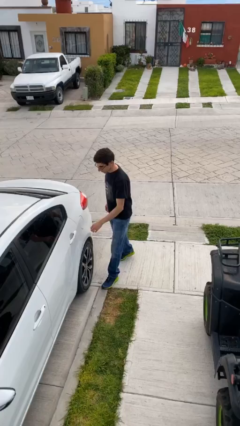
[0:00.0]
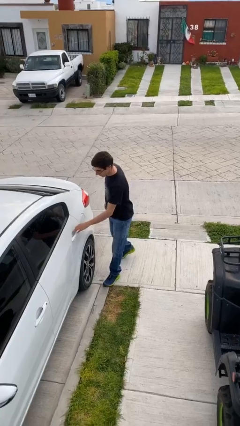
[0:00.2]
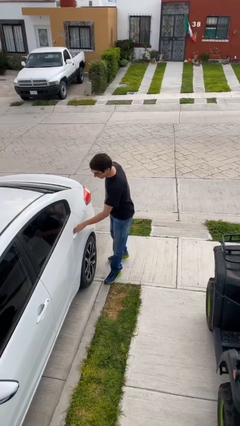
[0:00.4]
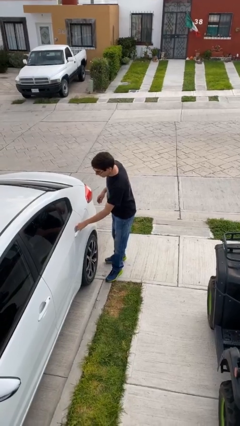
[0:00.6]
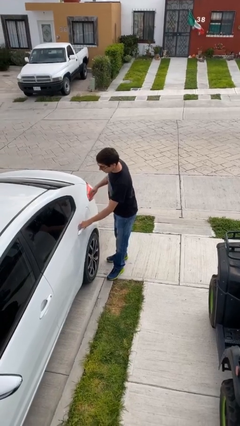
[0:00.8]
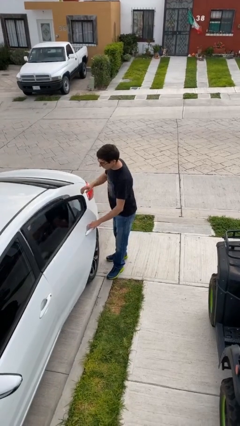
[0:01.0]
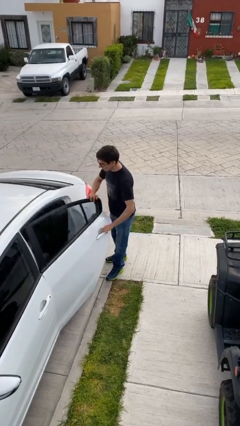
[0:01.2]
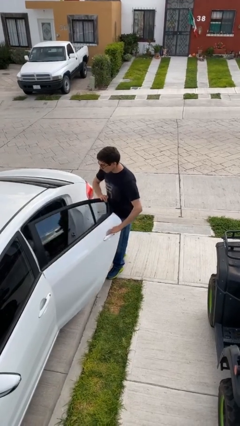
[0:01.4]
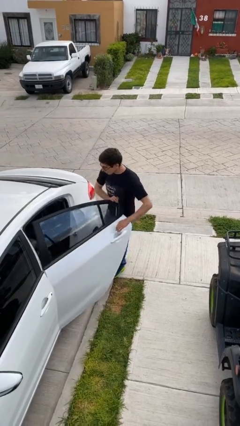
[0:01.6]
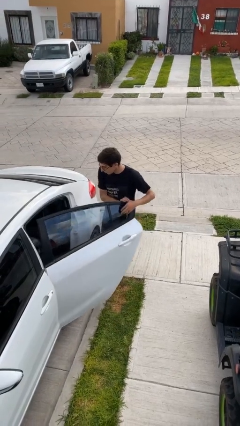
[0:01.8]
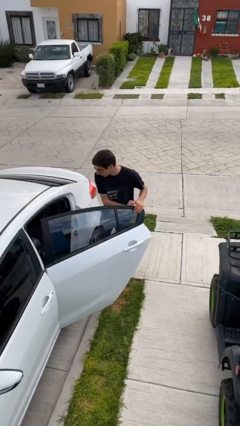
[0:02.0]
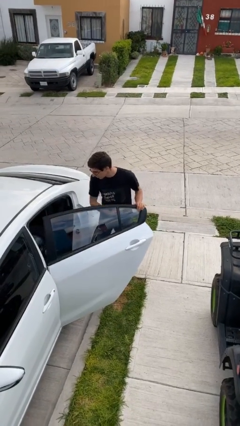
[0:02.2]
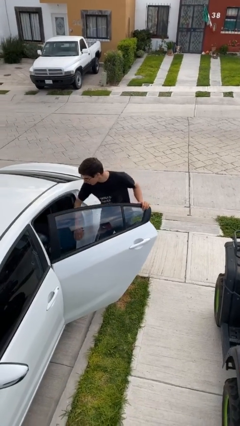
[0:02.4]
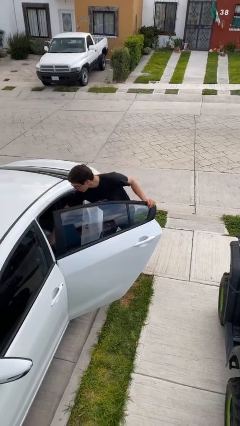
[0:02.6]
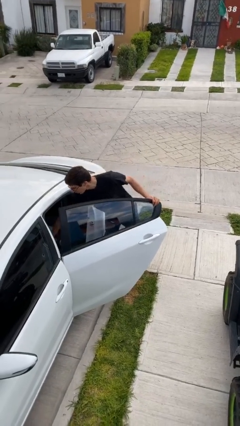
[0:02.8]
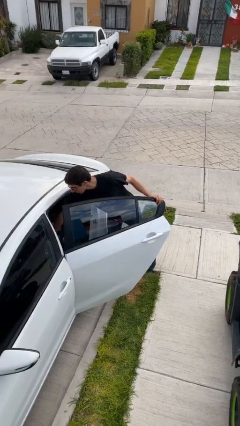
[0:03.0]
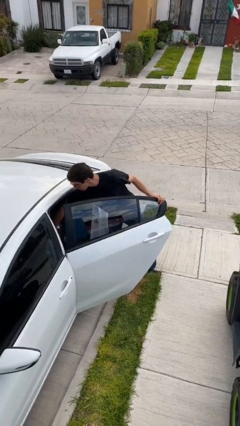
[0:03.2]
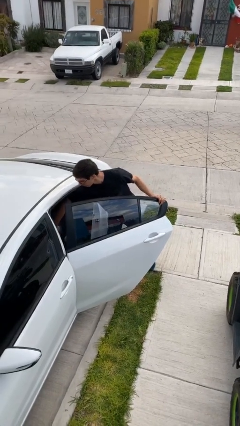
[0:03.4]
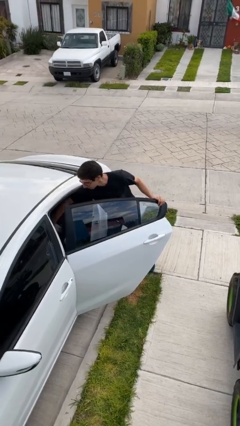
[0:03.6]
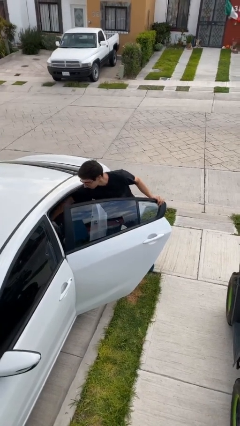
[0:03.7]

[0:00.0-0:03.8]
person opens car door

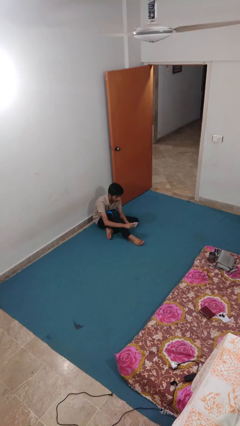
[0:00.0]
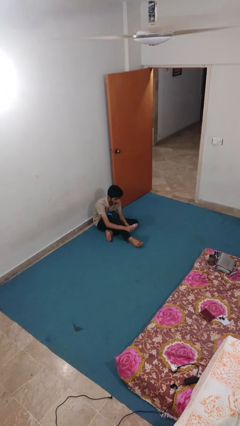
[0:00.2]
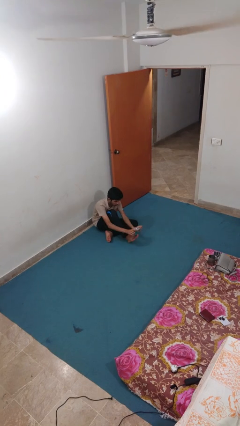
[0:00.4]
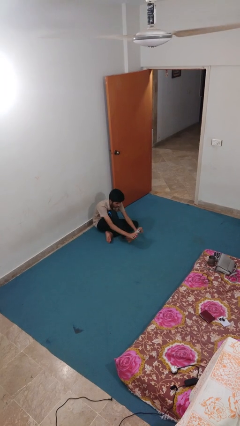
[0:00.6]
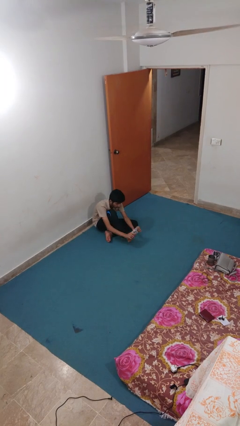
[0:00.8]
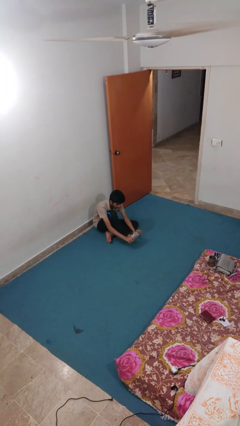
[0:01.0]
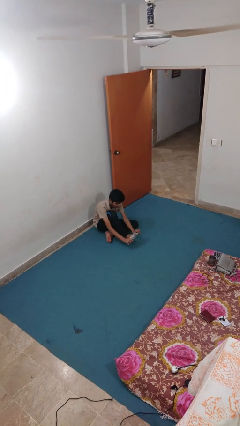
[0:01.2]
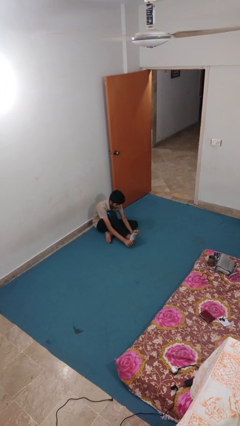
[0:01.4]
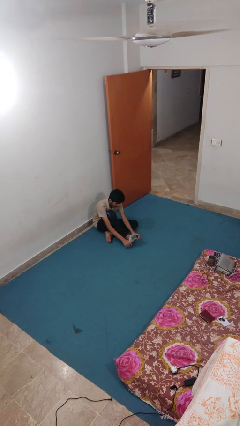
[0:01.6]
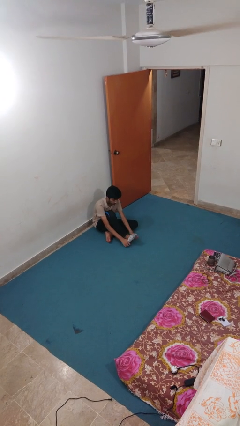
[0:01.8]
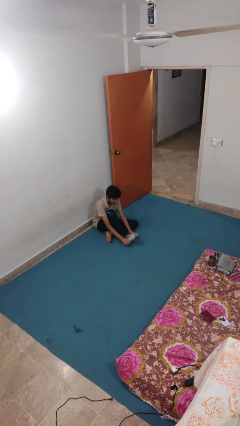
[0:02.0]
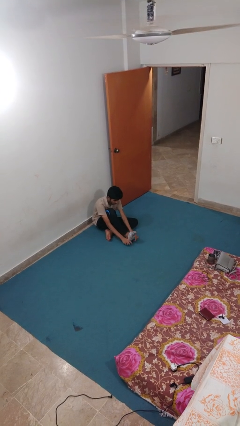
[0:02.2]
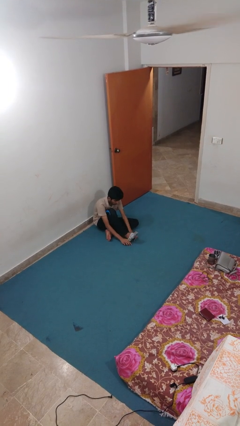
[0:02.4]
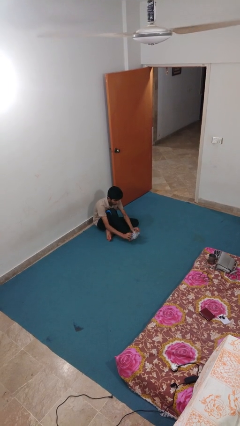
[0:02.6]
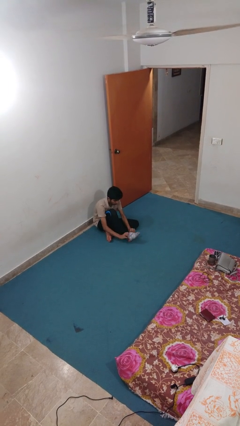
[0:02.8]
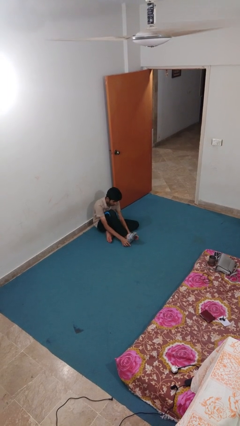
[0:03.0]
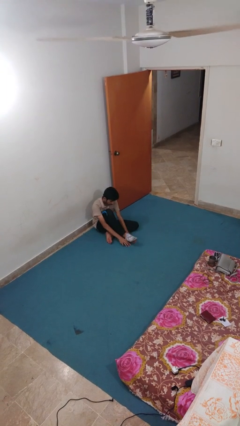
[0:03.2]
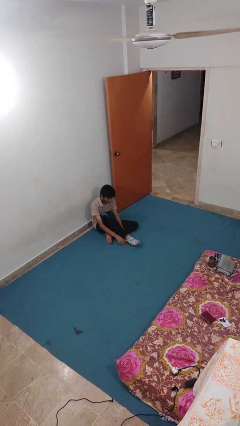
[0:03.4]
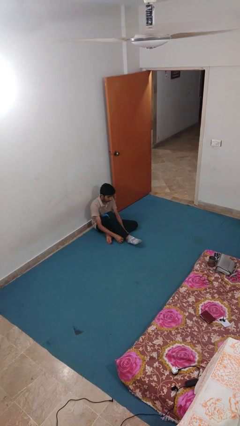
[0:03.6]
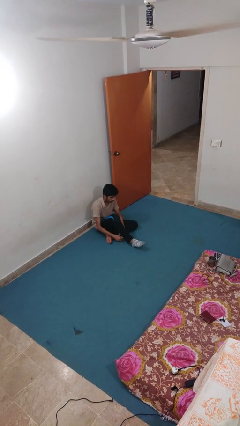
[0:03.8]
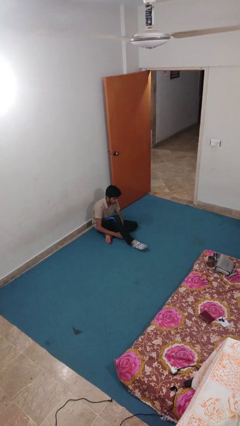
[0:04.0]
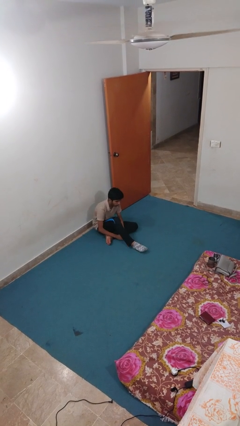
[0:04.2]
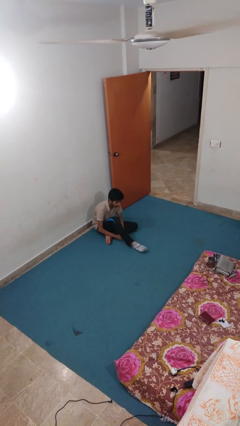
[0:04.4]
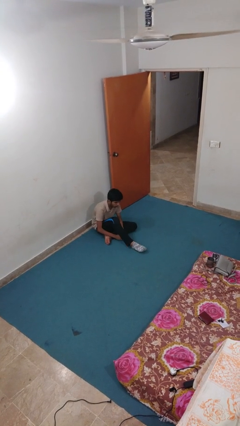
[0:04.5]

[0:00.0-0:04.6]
person puts on socks

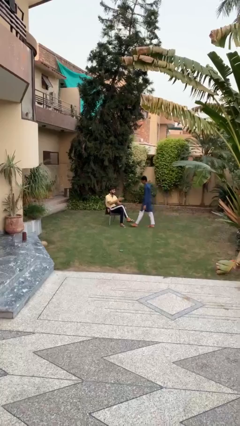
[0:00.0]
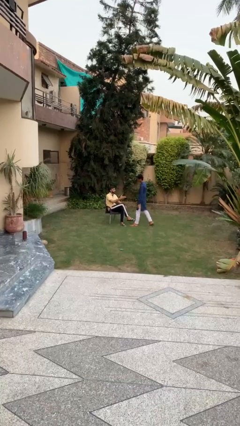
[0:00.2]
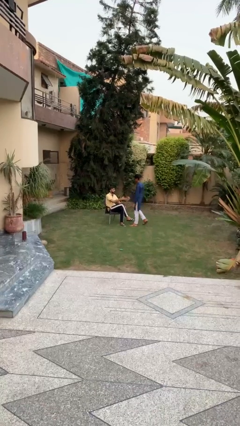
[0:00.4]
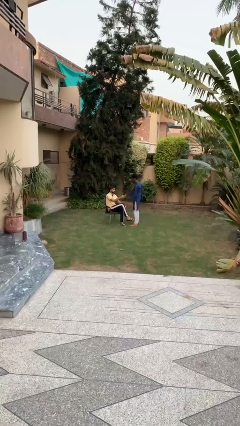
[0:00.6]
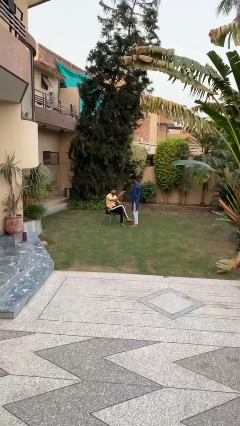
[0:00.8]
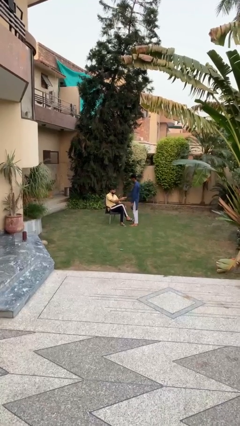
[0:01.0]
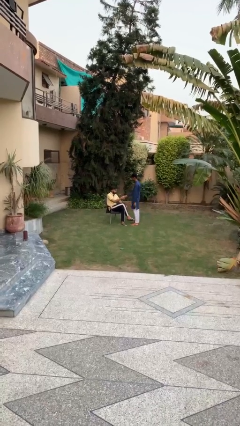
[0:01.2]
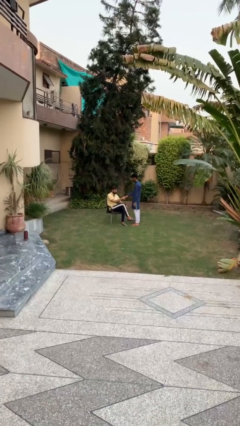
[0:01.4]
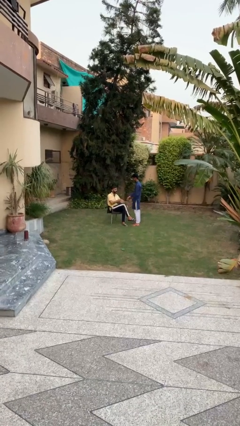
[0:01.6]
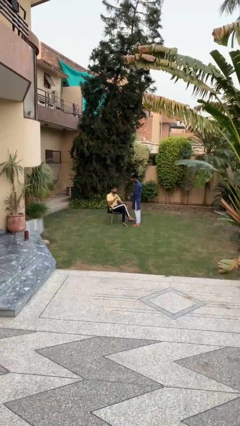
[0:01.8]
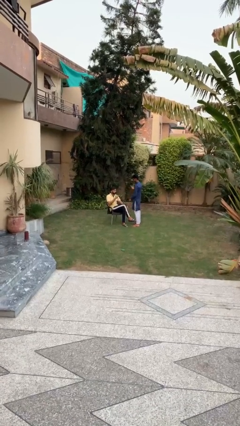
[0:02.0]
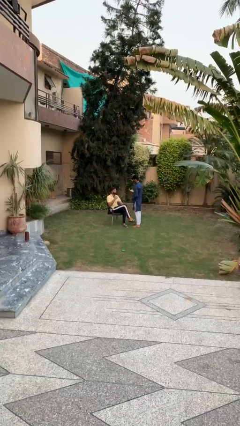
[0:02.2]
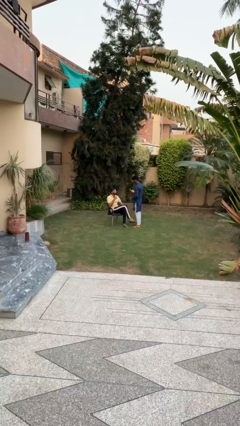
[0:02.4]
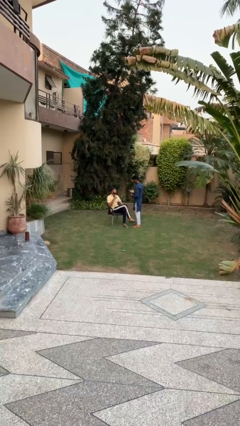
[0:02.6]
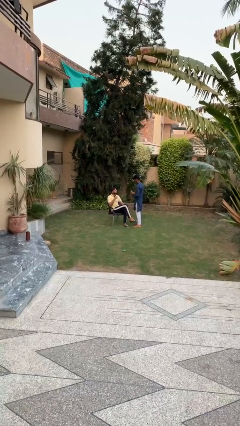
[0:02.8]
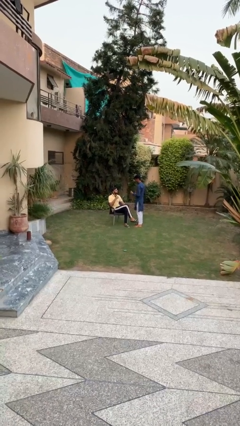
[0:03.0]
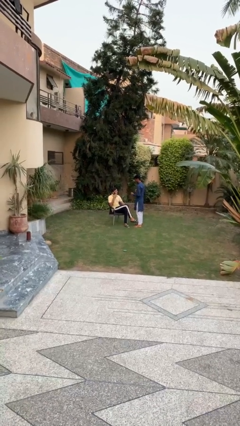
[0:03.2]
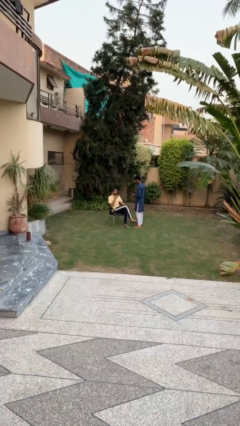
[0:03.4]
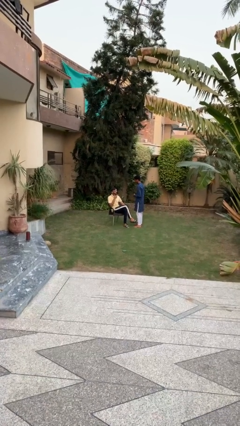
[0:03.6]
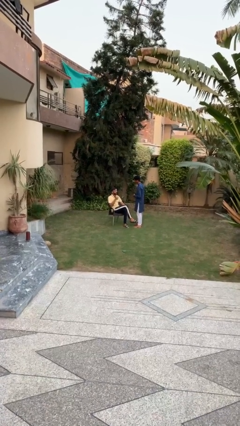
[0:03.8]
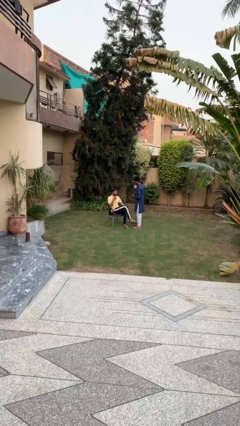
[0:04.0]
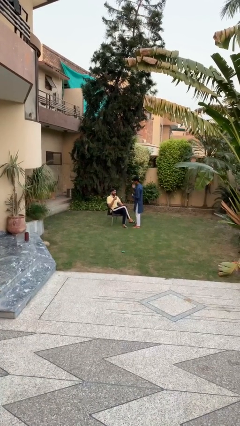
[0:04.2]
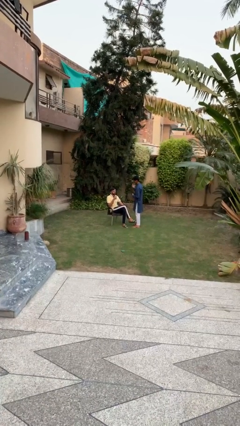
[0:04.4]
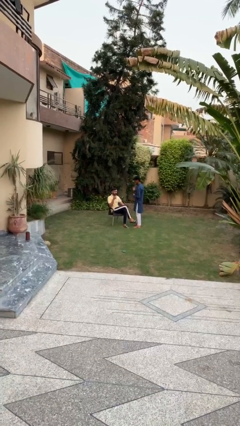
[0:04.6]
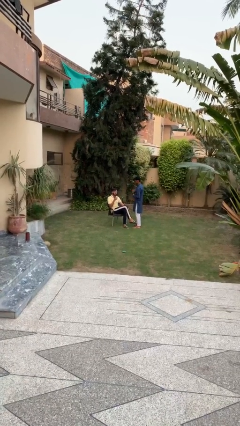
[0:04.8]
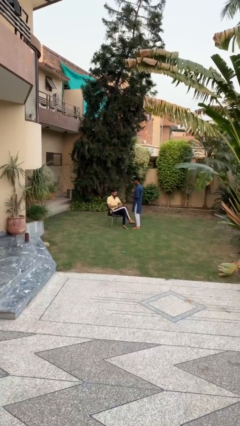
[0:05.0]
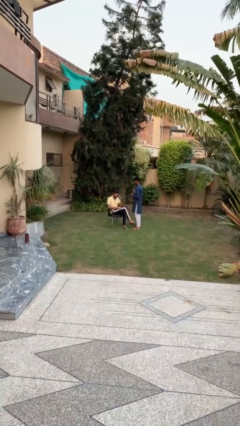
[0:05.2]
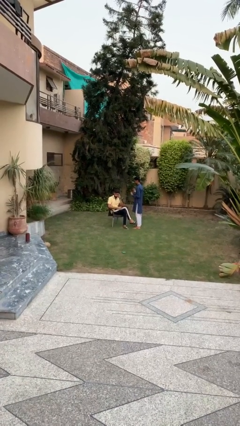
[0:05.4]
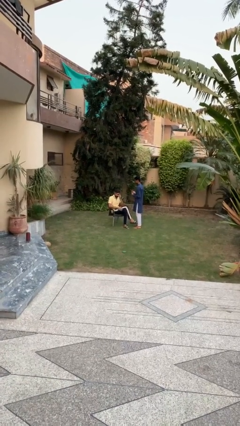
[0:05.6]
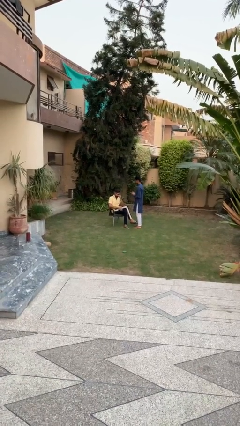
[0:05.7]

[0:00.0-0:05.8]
person shakes hand

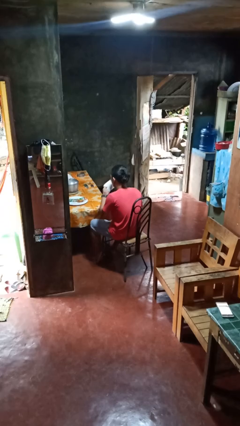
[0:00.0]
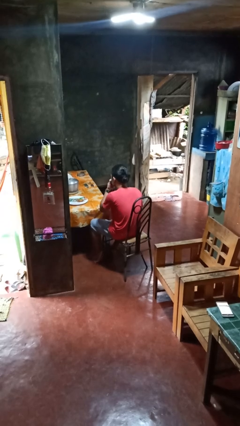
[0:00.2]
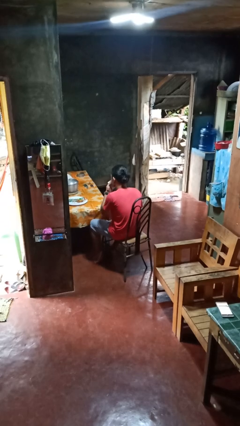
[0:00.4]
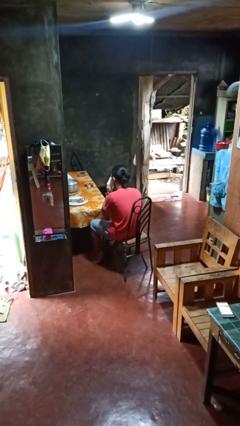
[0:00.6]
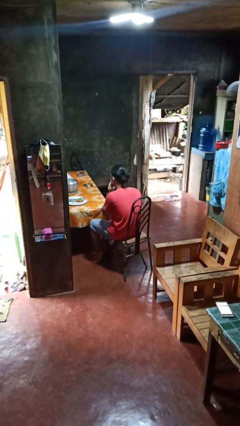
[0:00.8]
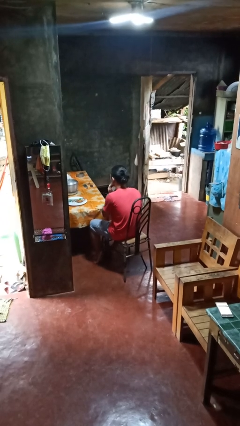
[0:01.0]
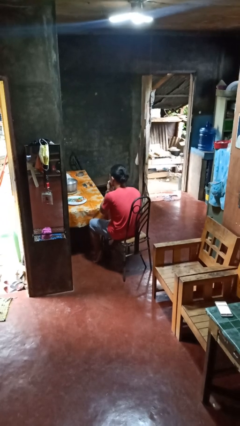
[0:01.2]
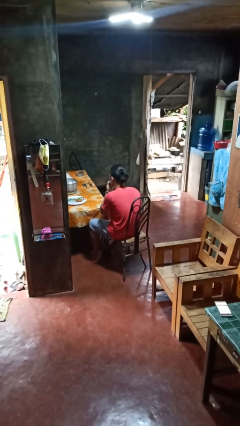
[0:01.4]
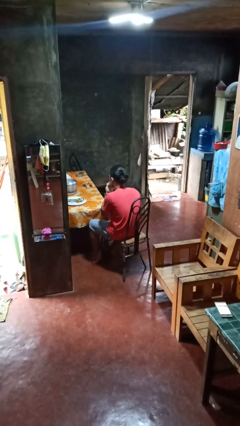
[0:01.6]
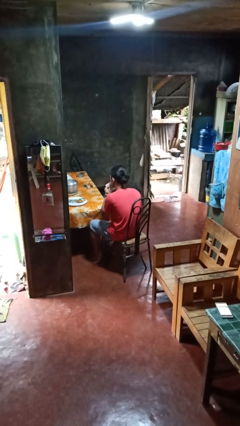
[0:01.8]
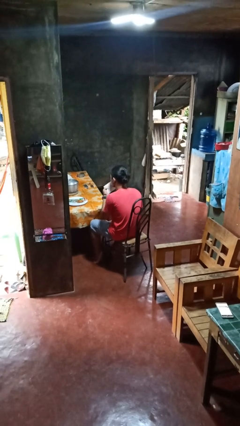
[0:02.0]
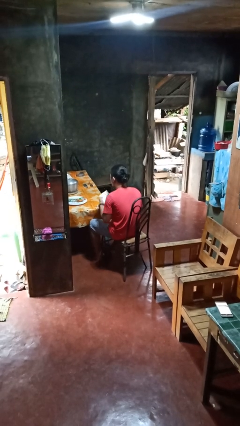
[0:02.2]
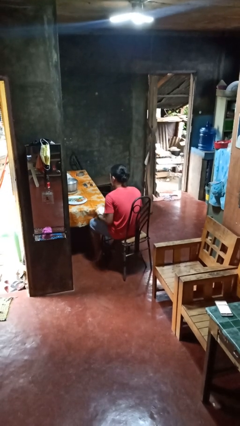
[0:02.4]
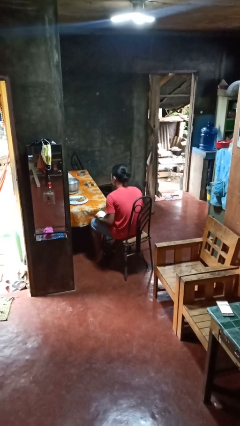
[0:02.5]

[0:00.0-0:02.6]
person wipes mouth with napkin

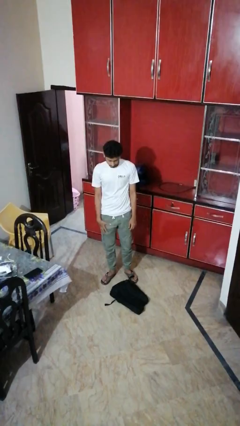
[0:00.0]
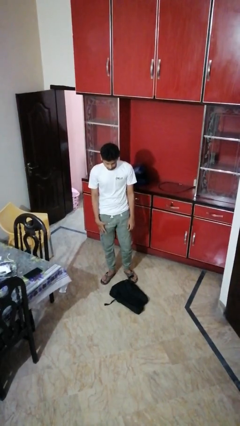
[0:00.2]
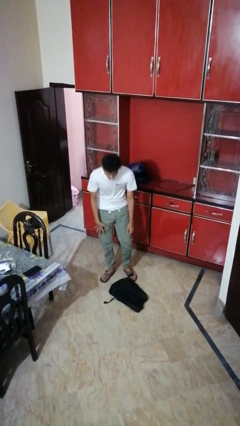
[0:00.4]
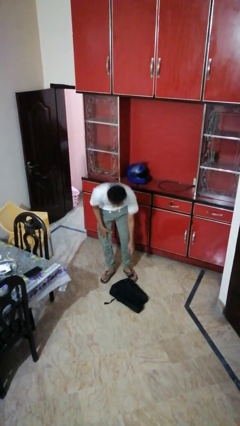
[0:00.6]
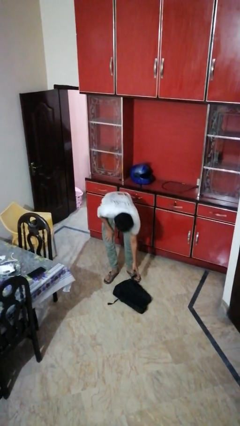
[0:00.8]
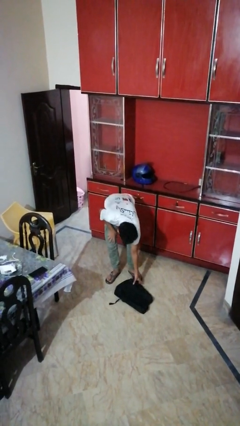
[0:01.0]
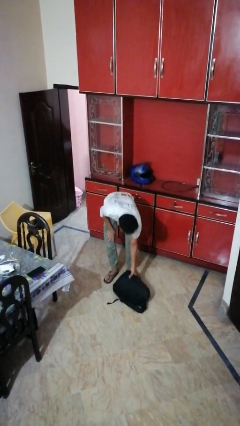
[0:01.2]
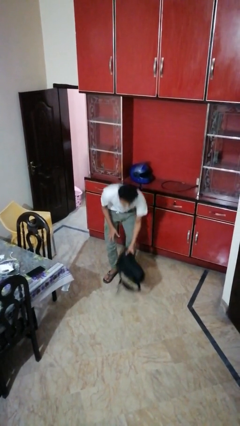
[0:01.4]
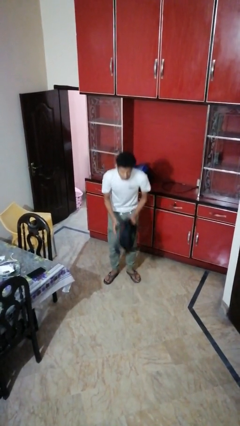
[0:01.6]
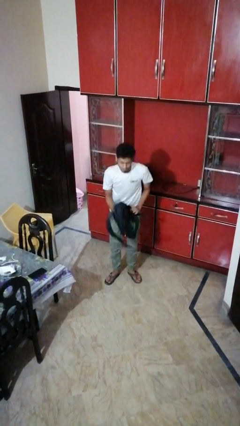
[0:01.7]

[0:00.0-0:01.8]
person picks up object from floor
